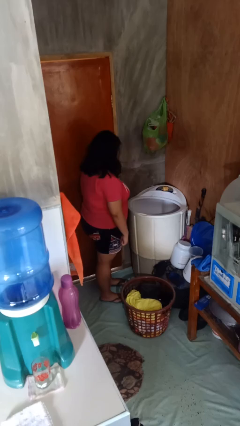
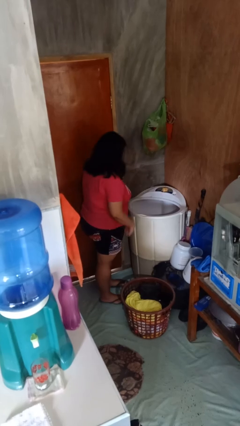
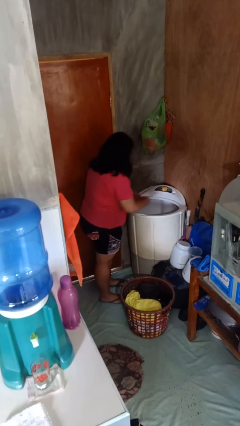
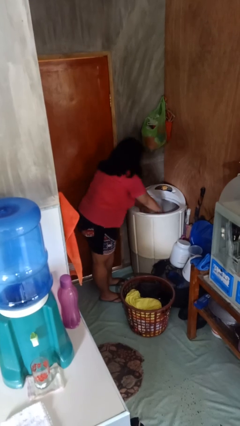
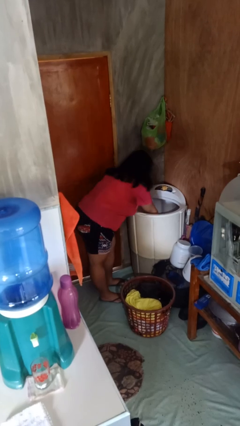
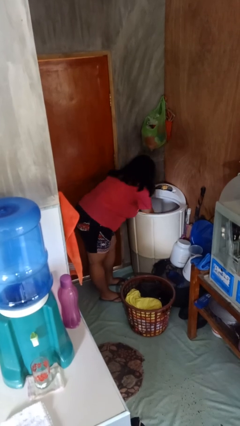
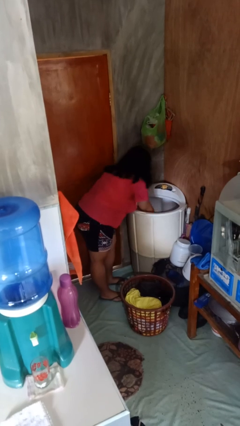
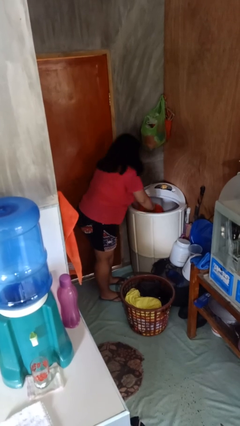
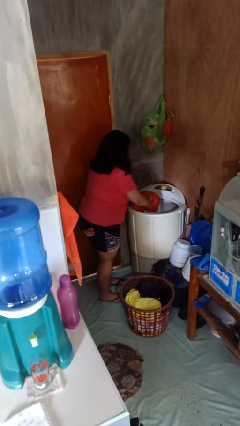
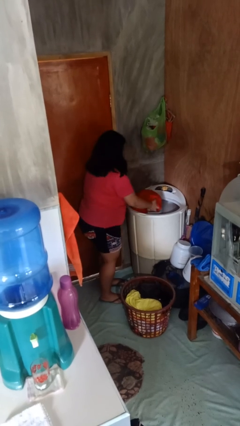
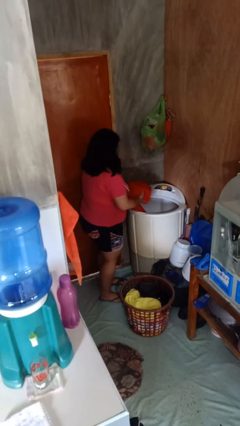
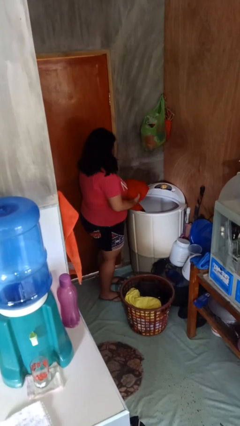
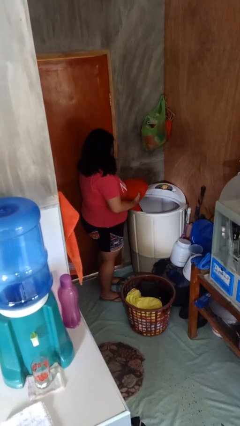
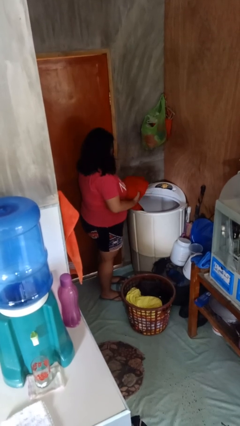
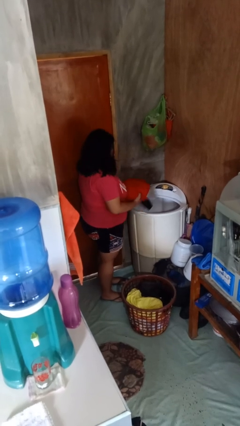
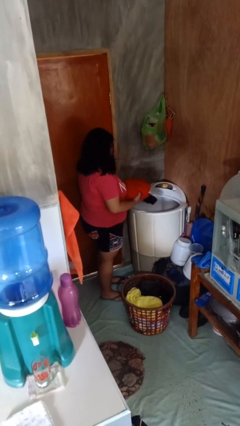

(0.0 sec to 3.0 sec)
person unloads dryer

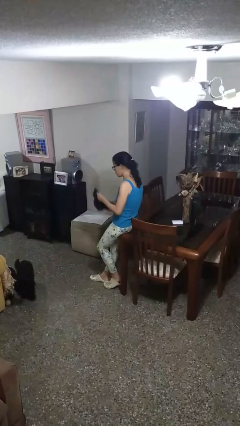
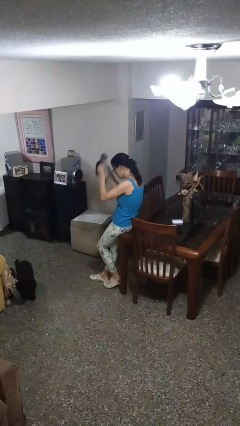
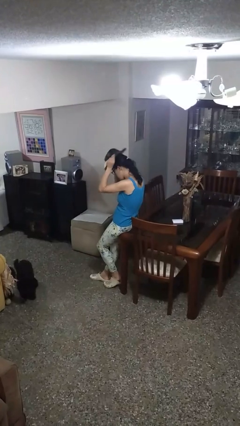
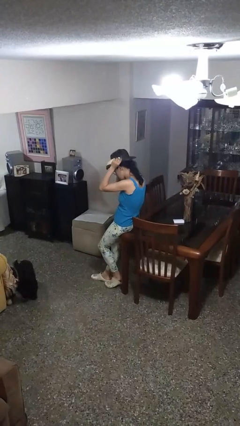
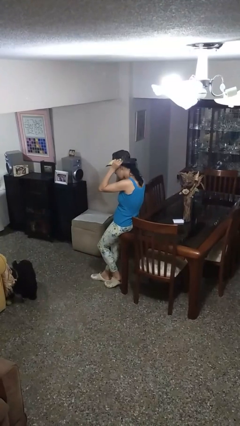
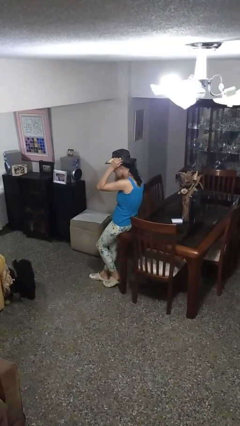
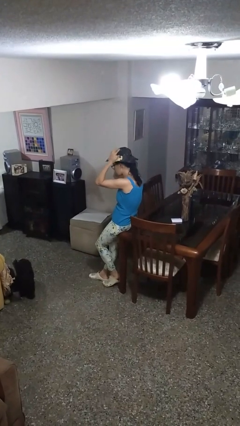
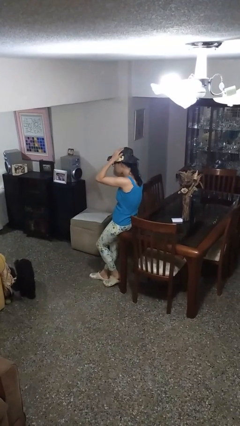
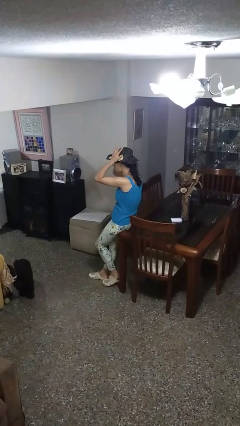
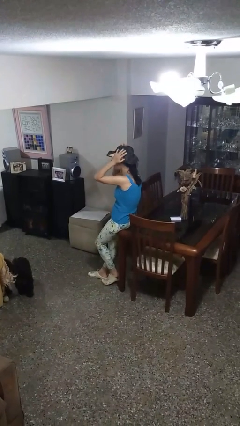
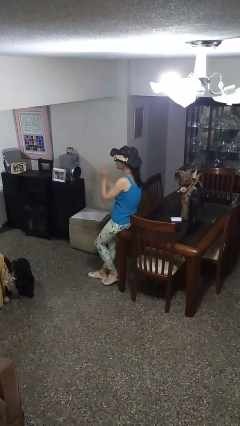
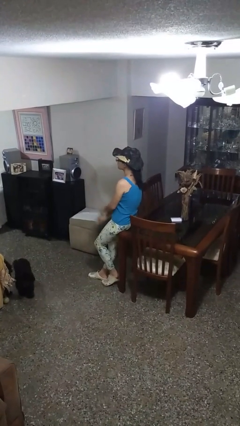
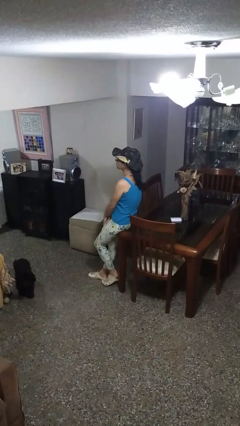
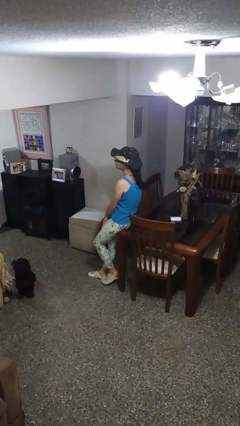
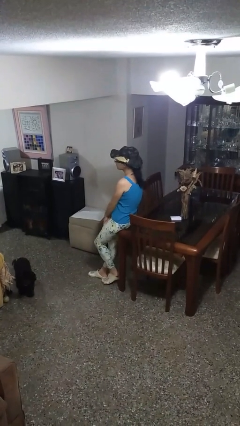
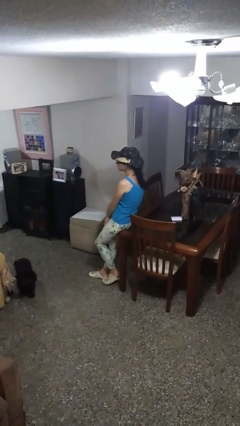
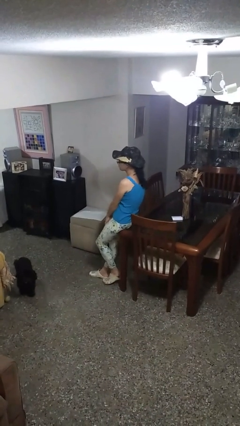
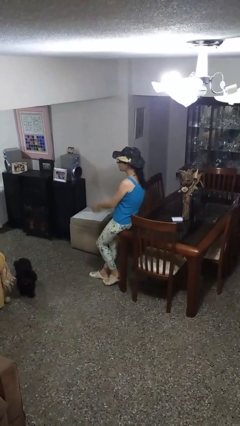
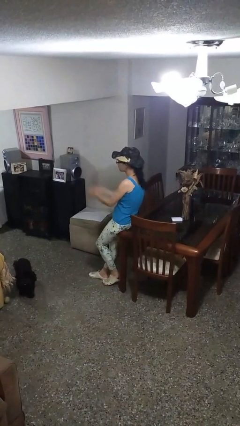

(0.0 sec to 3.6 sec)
person puts on hat

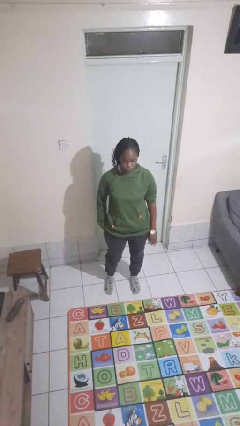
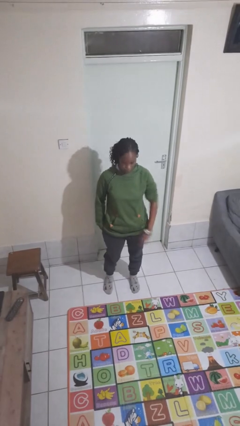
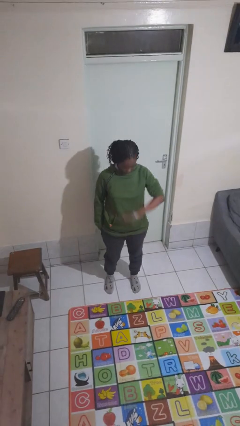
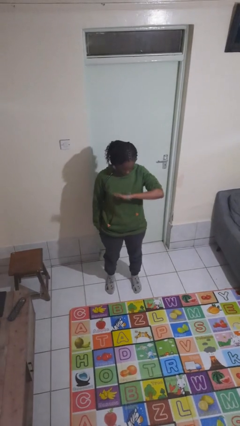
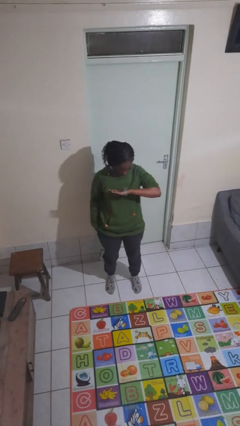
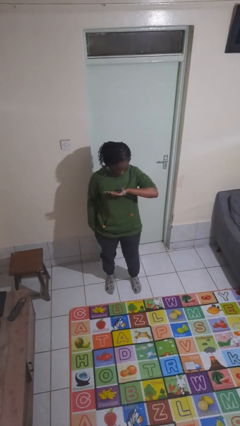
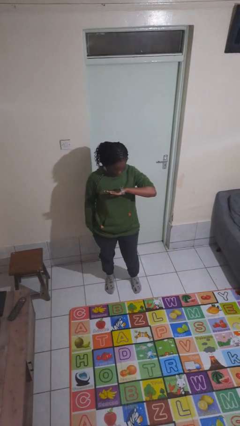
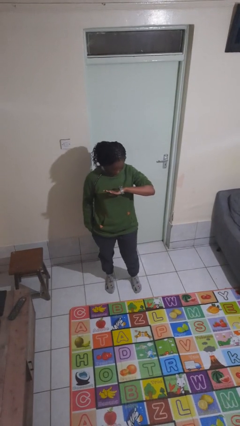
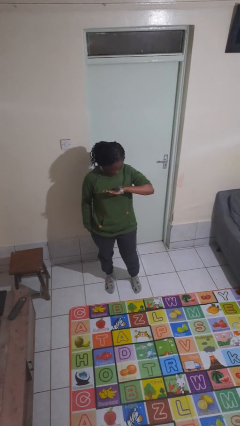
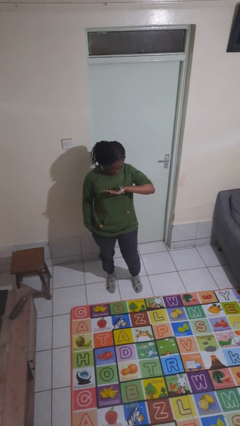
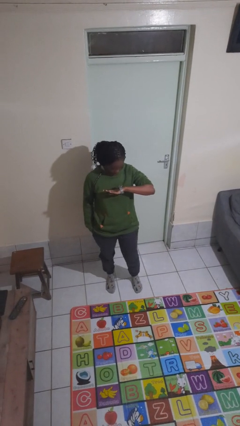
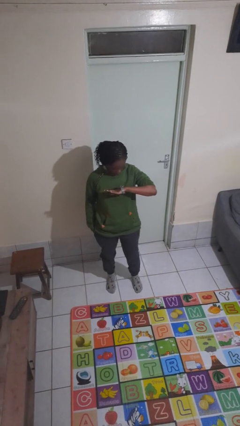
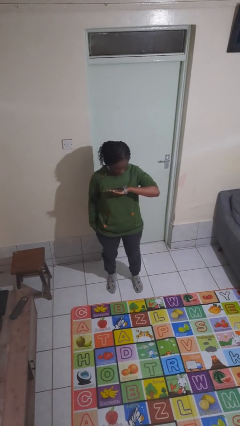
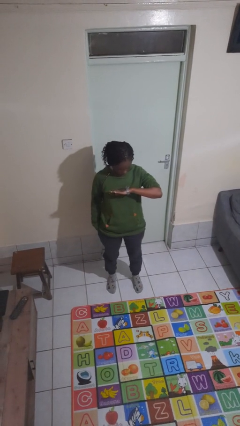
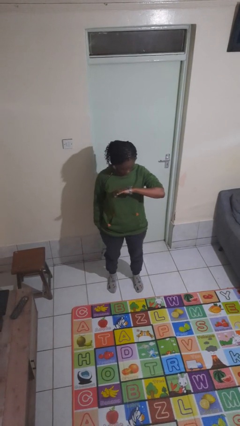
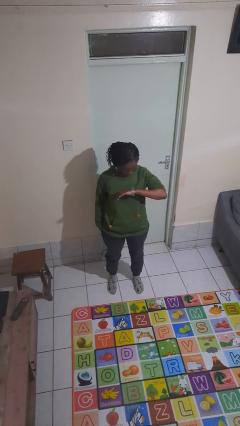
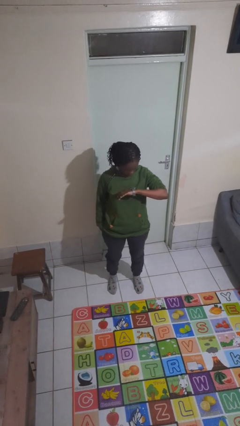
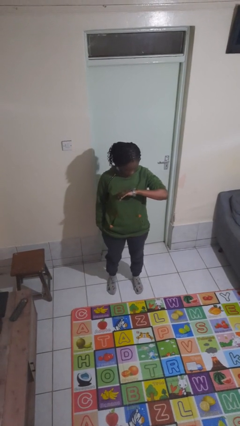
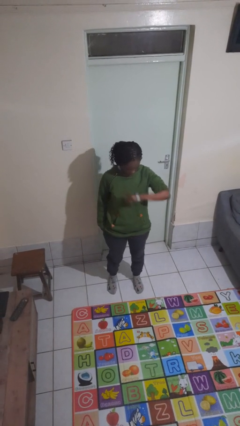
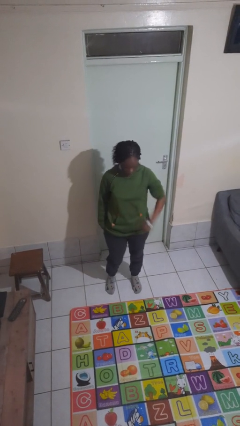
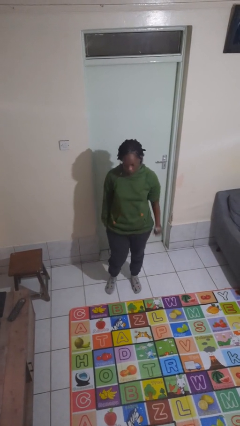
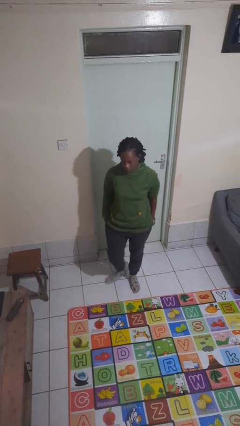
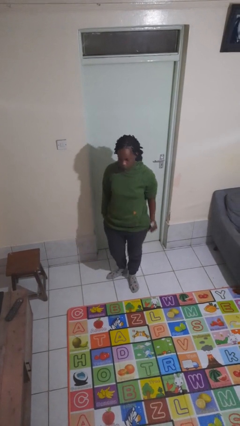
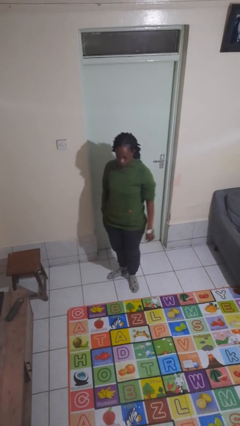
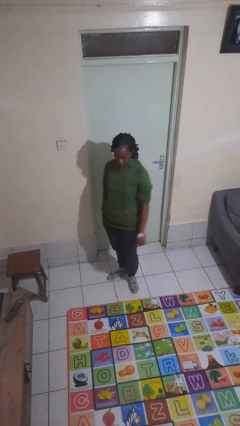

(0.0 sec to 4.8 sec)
person looks at wristwatch

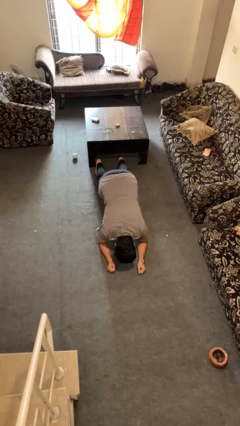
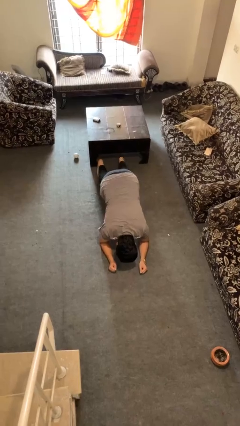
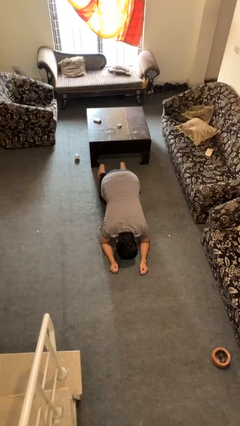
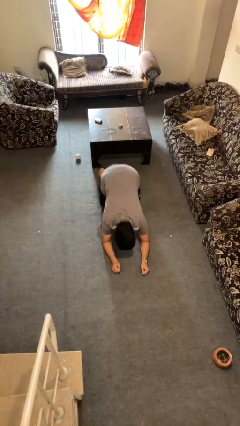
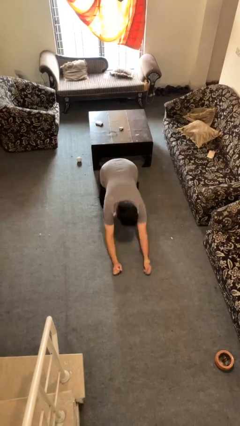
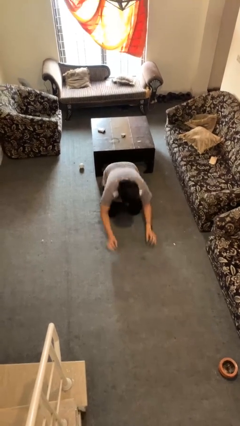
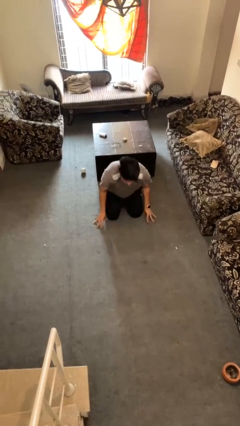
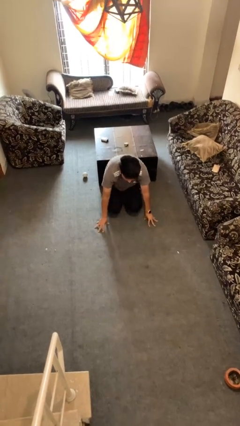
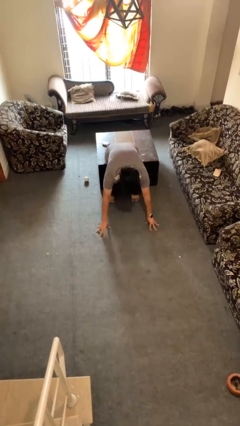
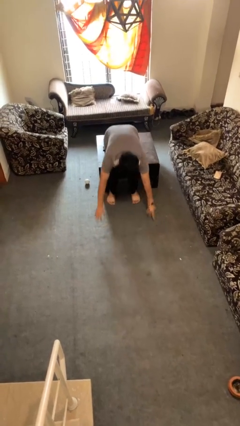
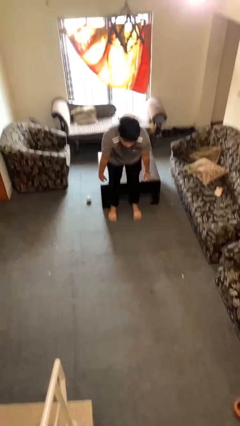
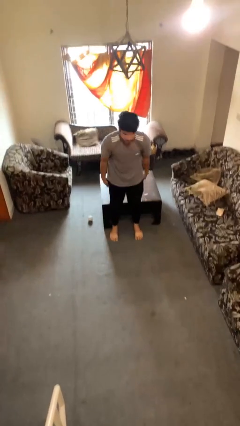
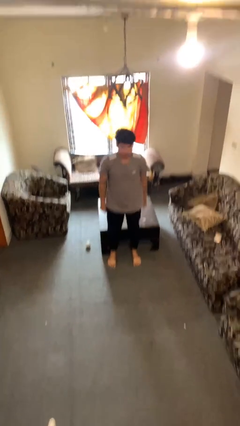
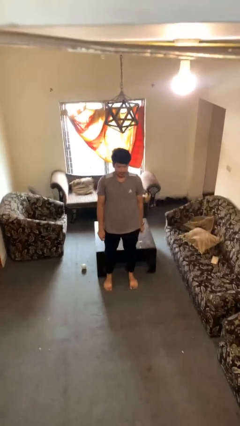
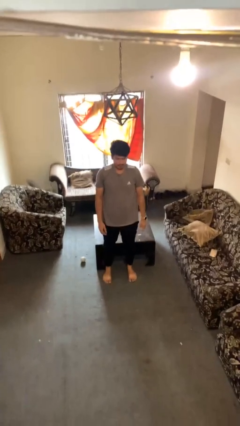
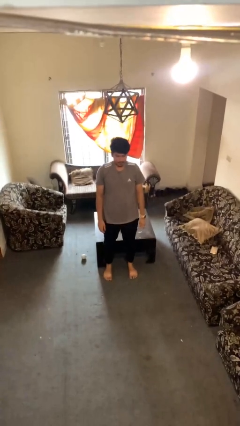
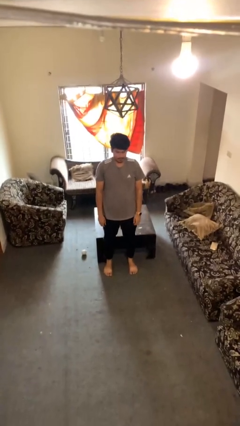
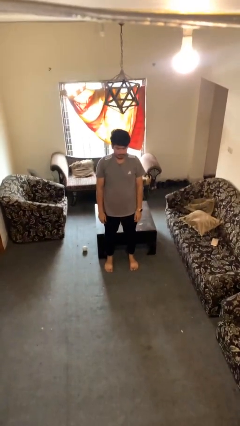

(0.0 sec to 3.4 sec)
person stands up from floor

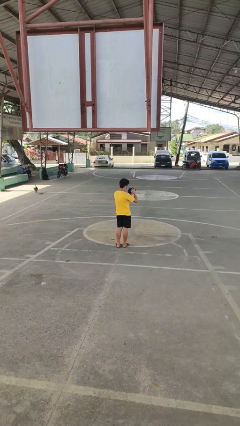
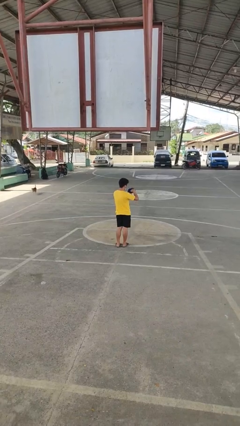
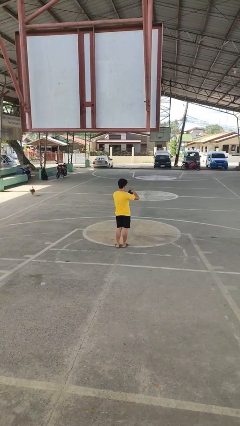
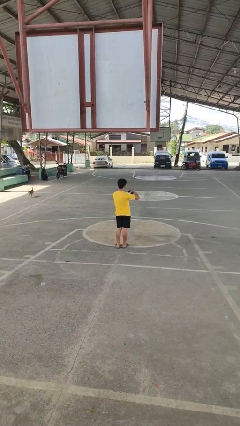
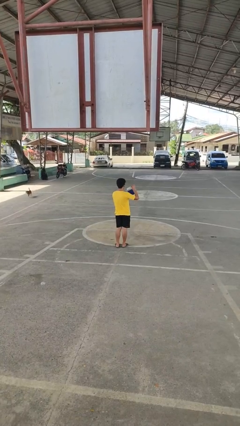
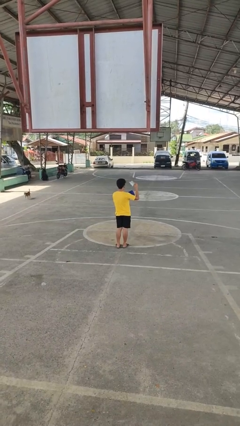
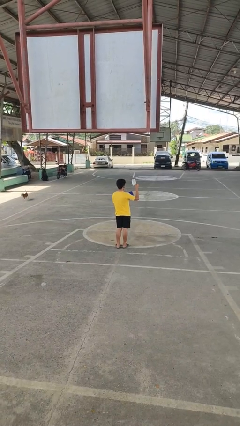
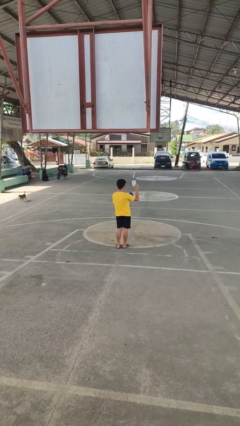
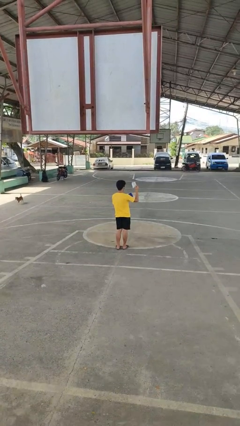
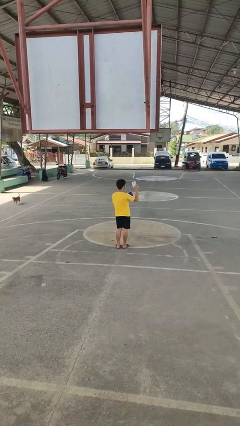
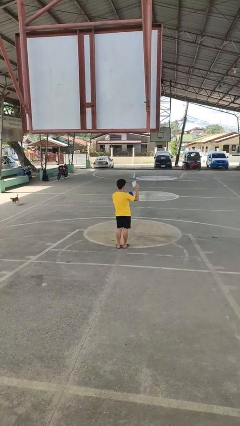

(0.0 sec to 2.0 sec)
person takes object from purse

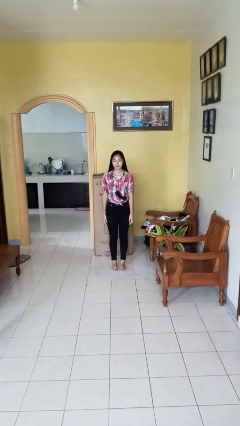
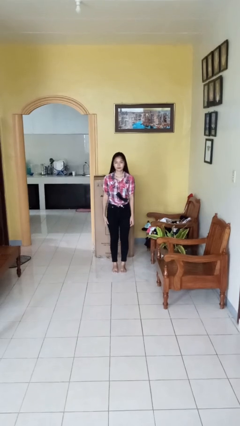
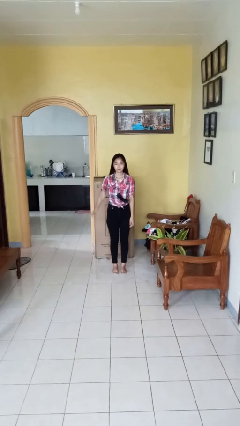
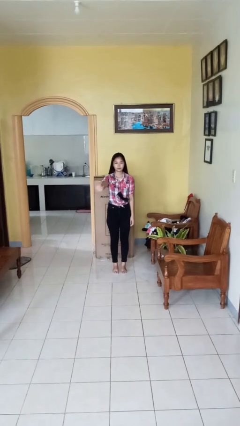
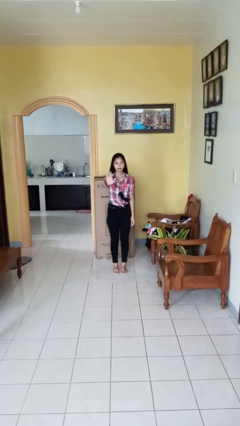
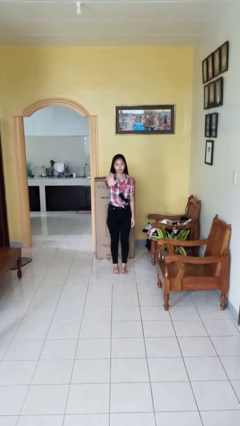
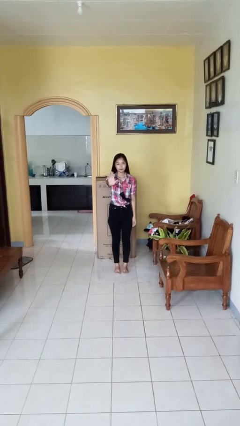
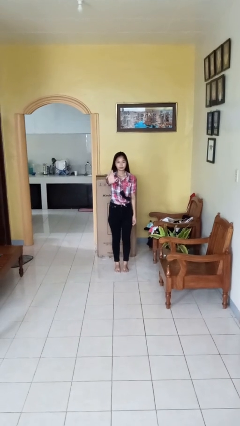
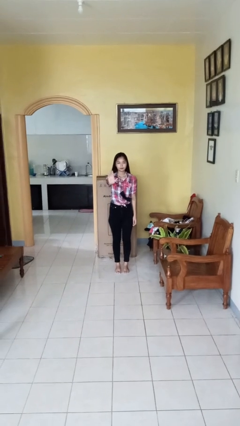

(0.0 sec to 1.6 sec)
person gestures stop
